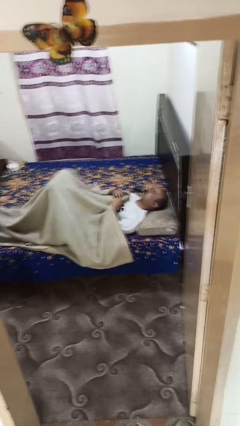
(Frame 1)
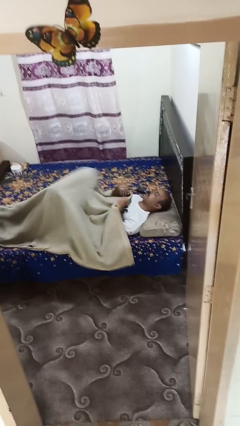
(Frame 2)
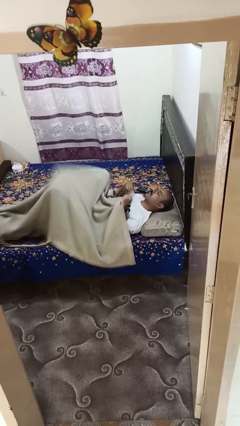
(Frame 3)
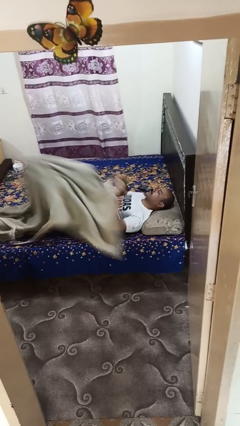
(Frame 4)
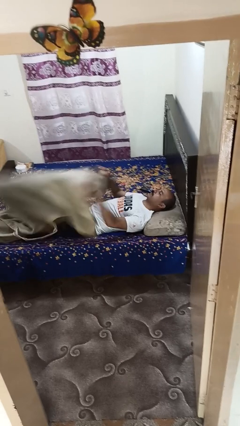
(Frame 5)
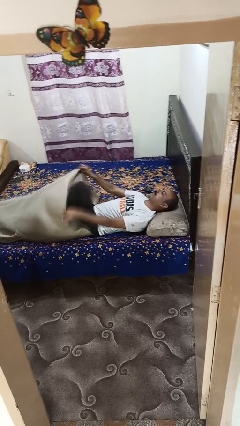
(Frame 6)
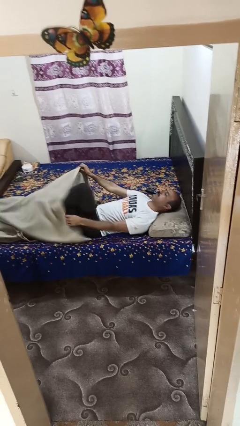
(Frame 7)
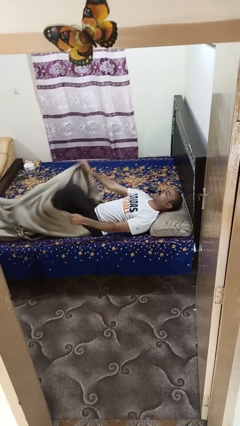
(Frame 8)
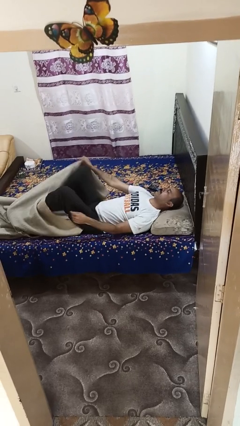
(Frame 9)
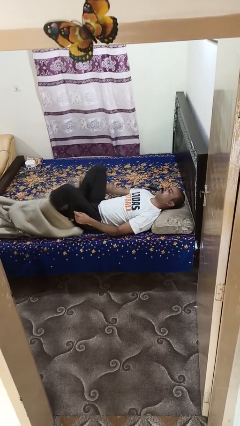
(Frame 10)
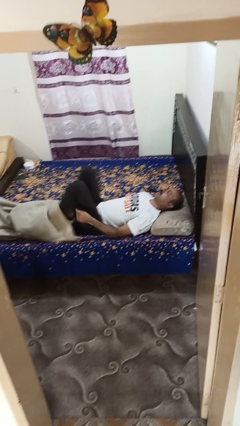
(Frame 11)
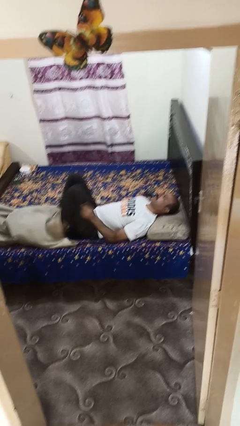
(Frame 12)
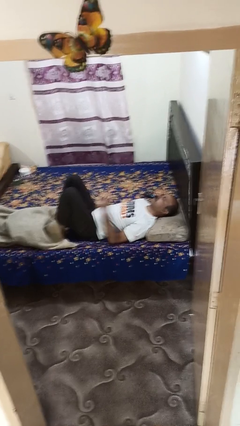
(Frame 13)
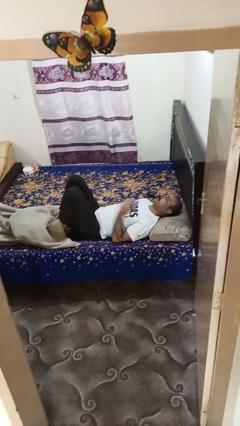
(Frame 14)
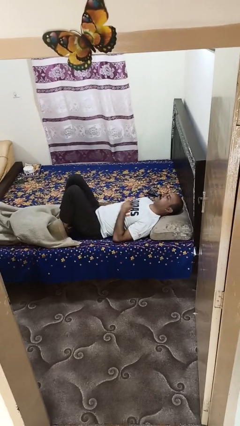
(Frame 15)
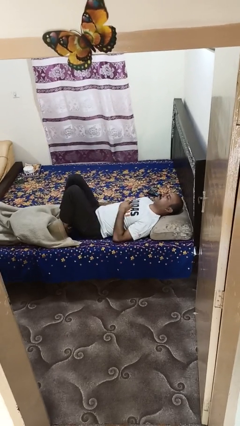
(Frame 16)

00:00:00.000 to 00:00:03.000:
person uncovers with bedsheets

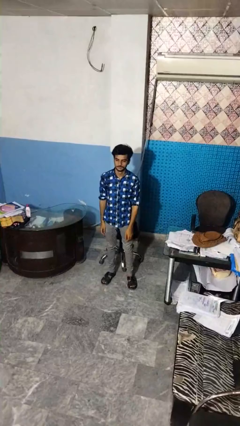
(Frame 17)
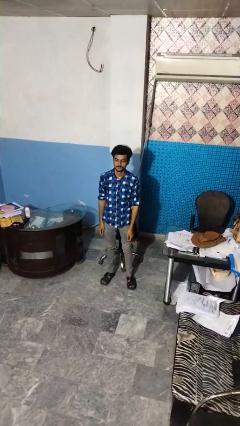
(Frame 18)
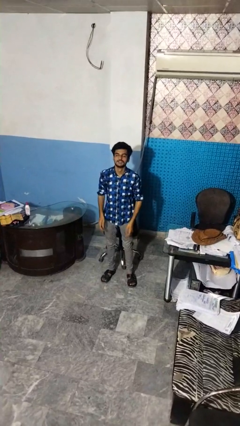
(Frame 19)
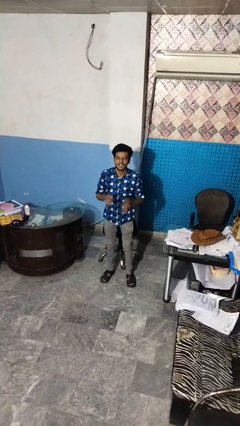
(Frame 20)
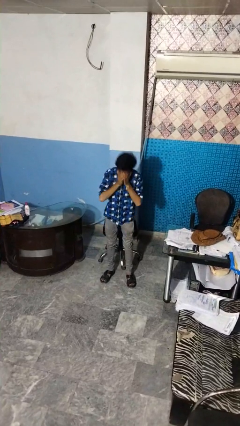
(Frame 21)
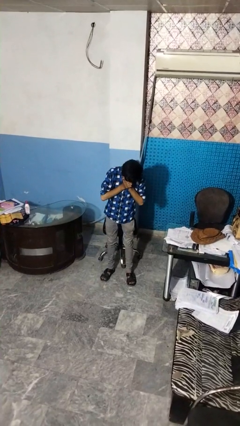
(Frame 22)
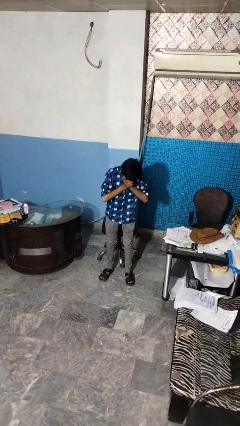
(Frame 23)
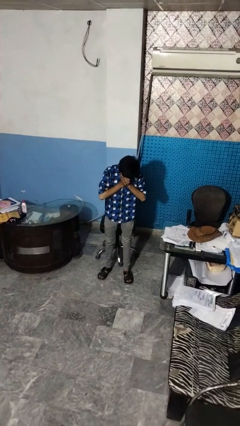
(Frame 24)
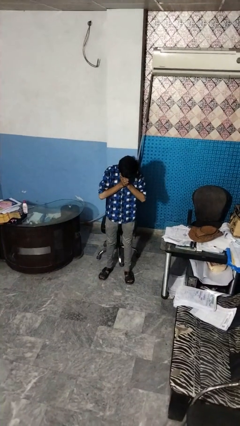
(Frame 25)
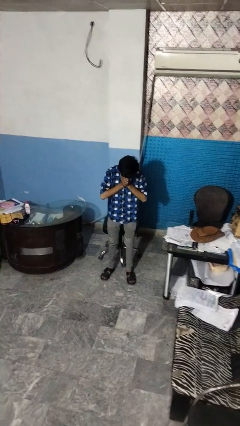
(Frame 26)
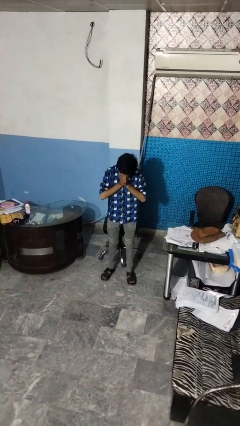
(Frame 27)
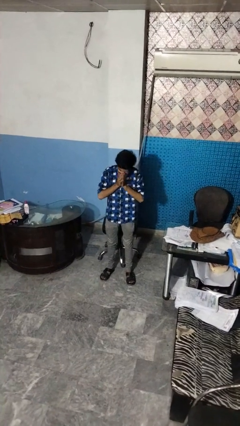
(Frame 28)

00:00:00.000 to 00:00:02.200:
person sneezes into hand

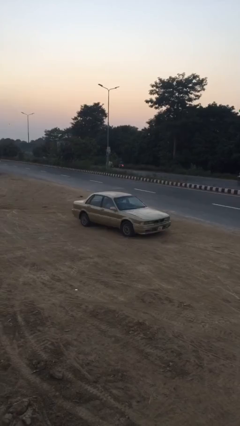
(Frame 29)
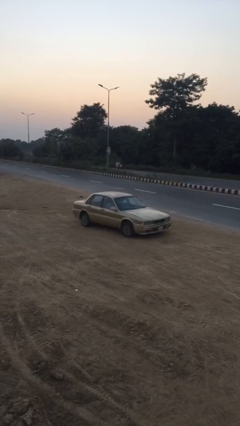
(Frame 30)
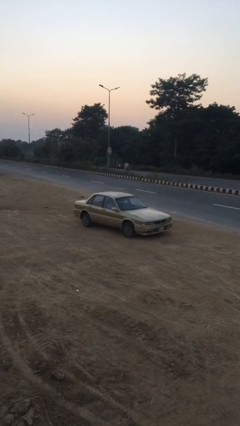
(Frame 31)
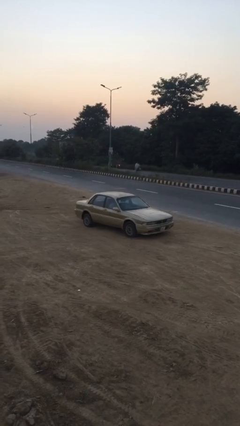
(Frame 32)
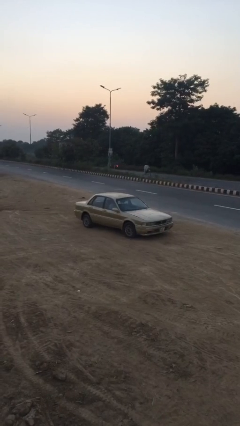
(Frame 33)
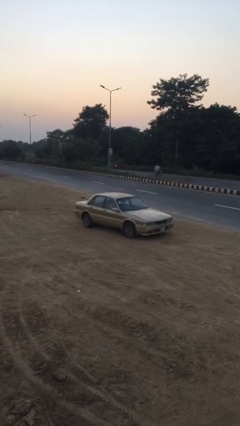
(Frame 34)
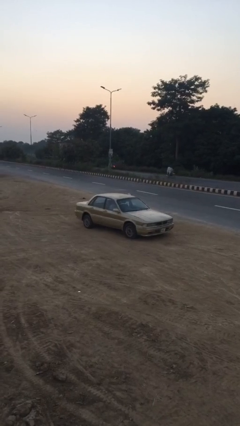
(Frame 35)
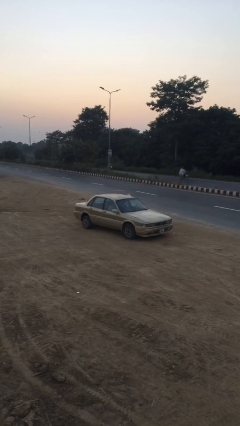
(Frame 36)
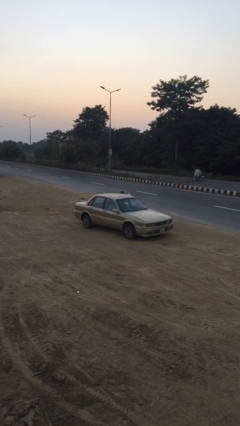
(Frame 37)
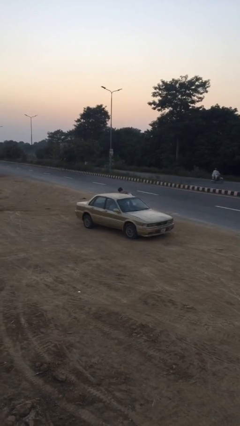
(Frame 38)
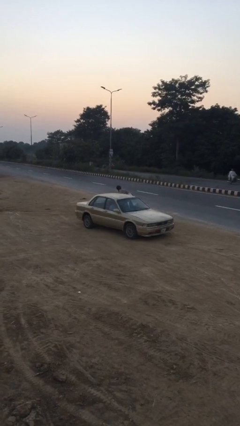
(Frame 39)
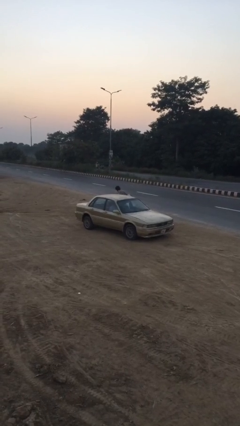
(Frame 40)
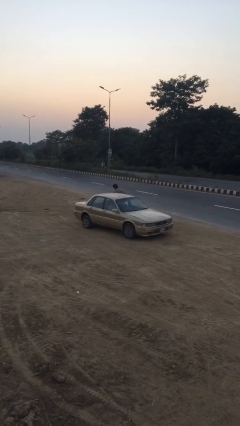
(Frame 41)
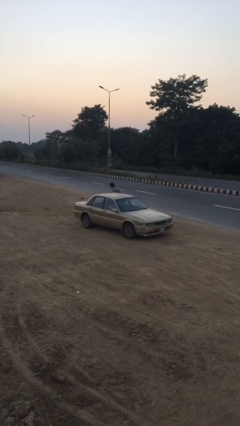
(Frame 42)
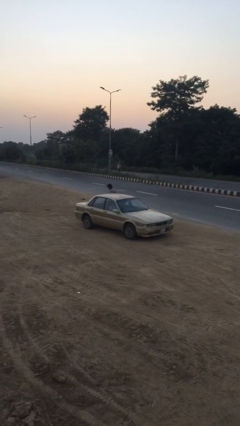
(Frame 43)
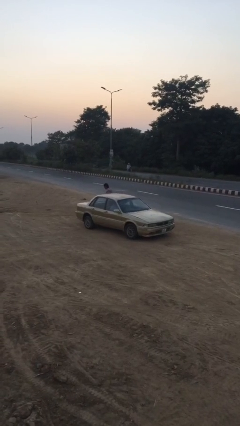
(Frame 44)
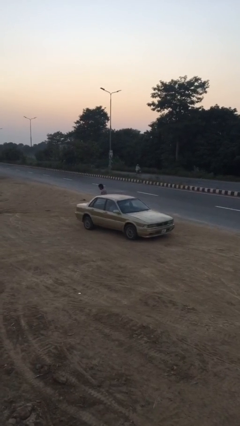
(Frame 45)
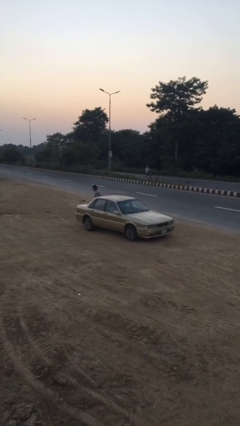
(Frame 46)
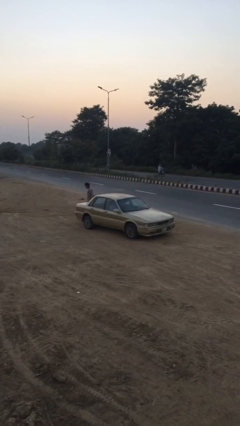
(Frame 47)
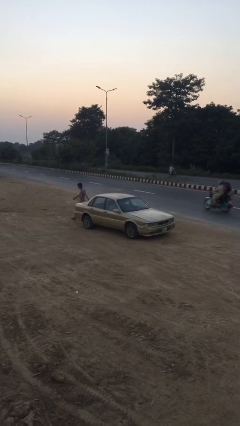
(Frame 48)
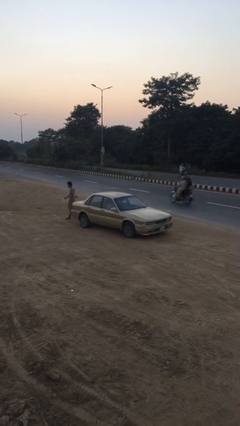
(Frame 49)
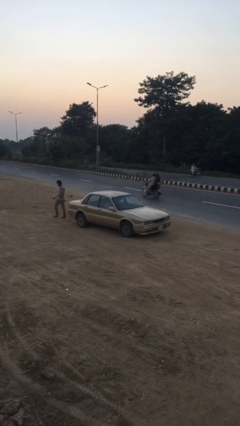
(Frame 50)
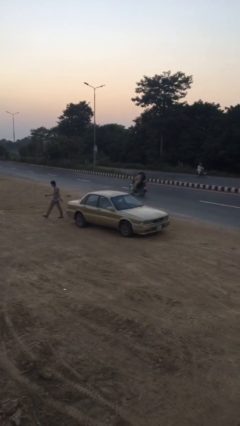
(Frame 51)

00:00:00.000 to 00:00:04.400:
car drops off person

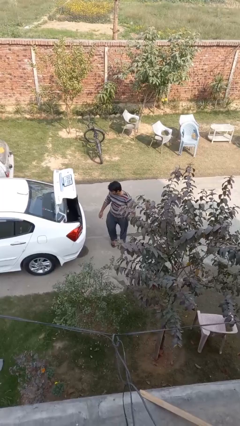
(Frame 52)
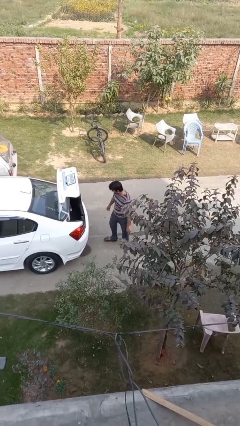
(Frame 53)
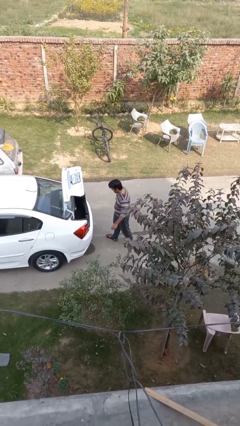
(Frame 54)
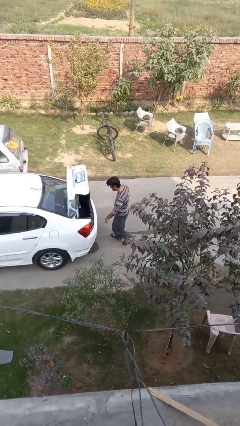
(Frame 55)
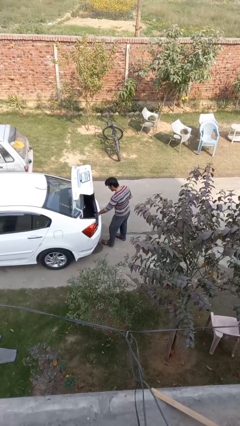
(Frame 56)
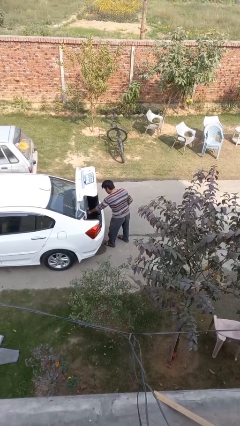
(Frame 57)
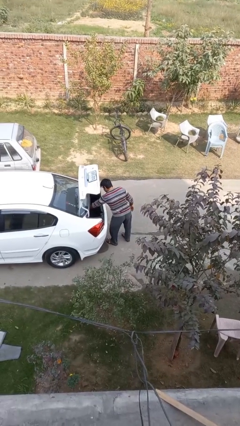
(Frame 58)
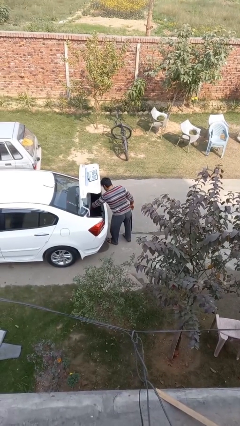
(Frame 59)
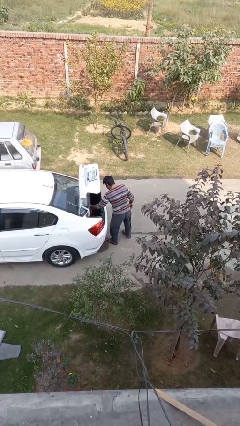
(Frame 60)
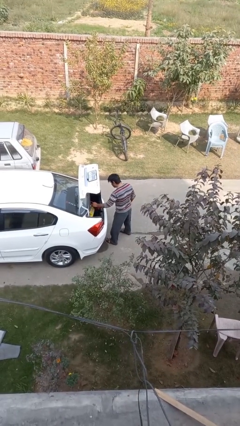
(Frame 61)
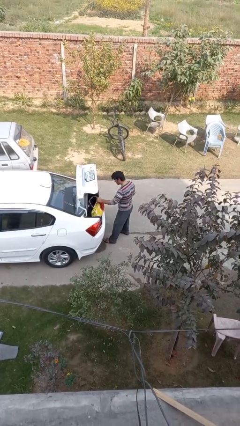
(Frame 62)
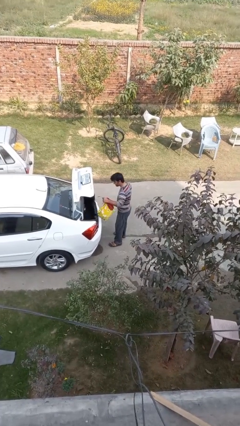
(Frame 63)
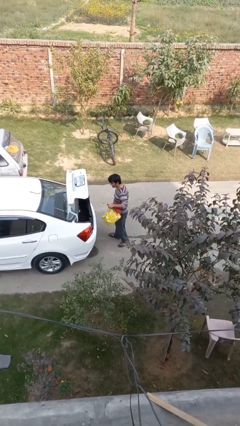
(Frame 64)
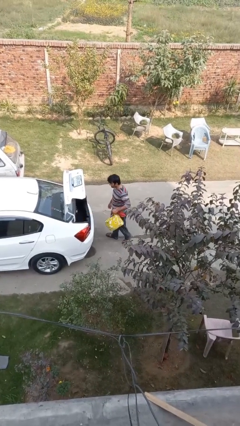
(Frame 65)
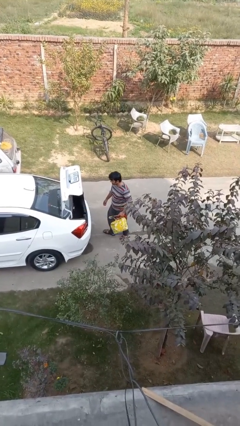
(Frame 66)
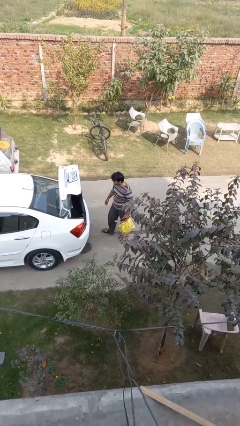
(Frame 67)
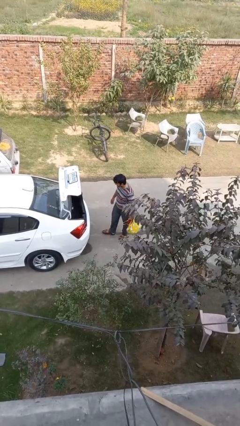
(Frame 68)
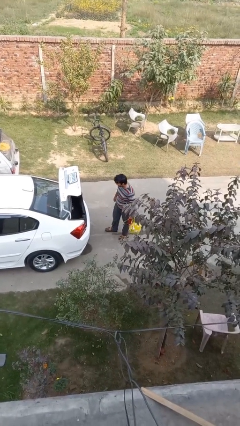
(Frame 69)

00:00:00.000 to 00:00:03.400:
person unloads car

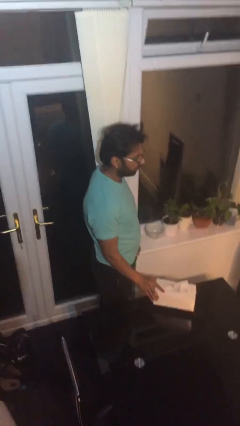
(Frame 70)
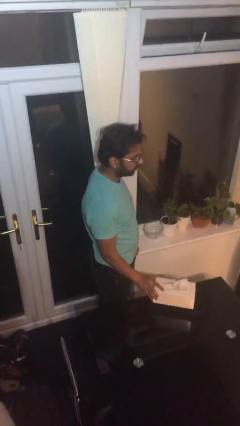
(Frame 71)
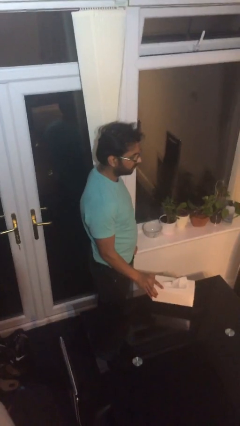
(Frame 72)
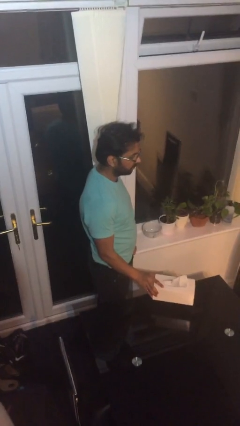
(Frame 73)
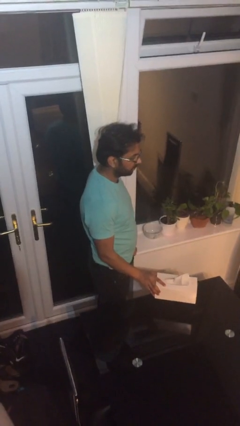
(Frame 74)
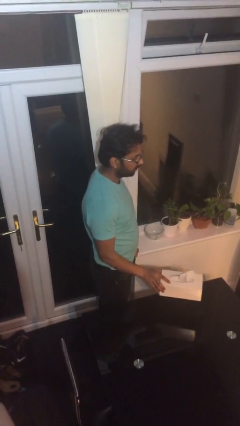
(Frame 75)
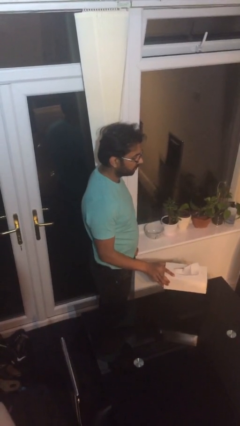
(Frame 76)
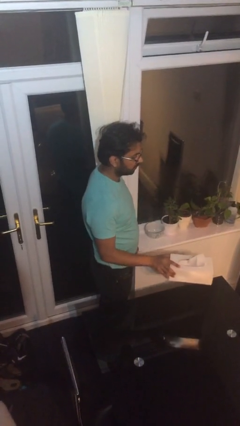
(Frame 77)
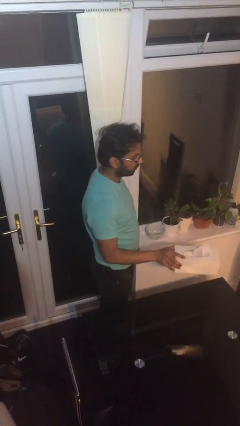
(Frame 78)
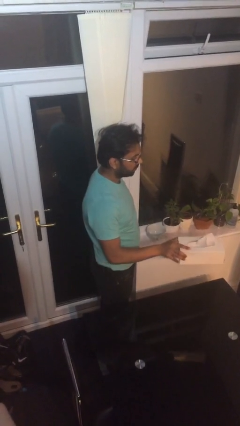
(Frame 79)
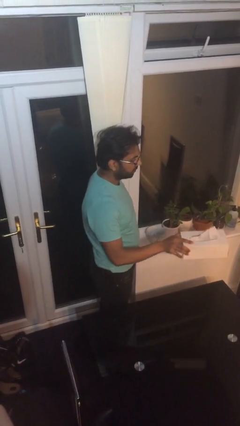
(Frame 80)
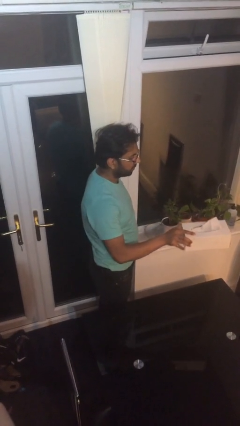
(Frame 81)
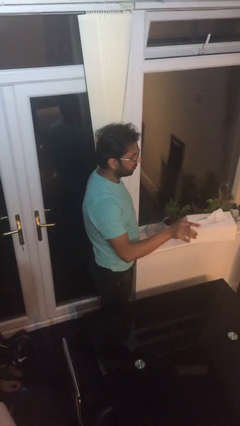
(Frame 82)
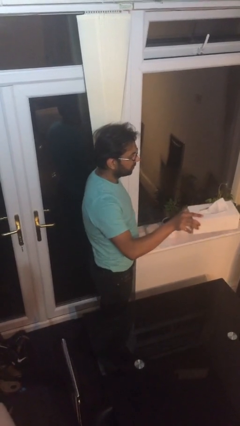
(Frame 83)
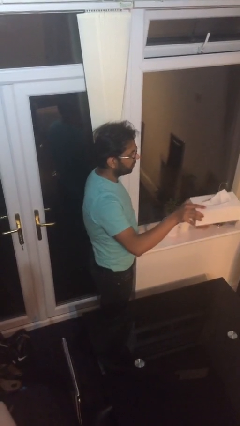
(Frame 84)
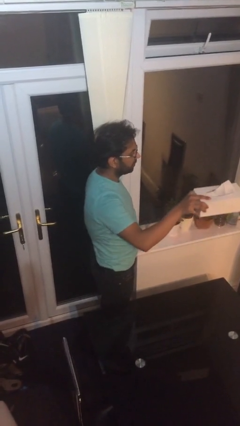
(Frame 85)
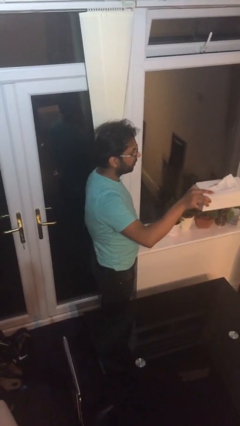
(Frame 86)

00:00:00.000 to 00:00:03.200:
person picks up object from table

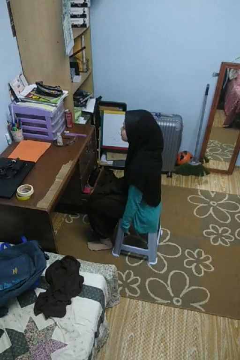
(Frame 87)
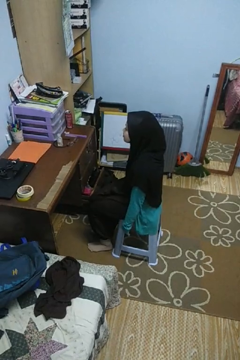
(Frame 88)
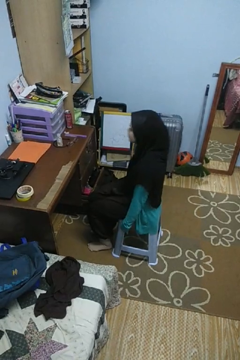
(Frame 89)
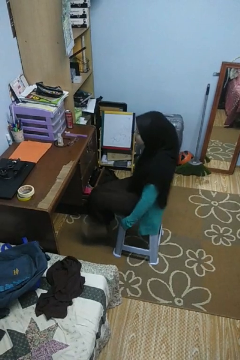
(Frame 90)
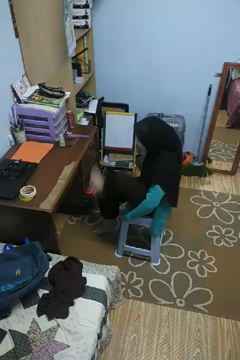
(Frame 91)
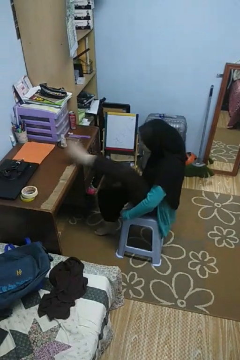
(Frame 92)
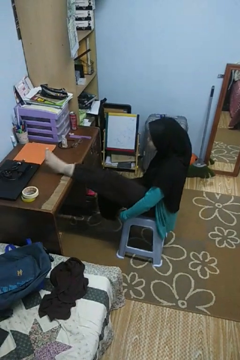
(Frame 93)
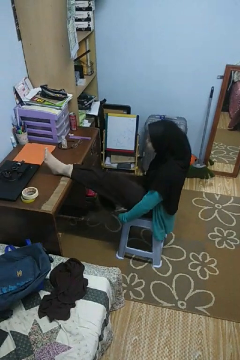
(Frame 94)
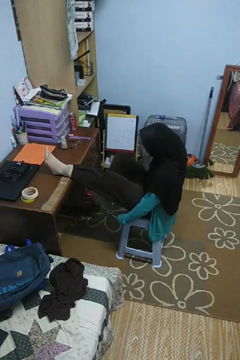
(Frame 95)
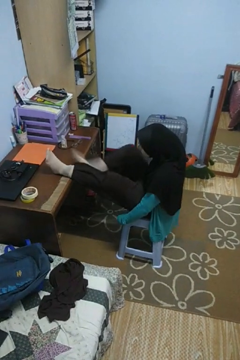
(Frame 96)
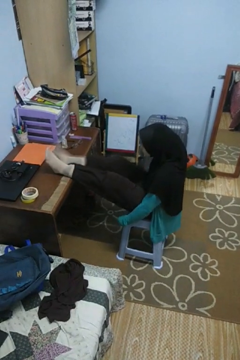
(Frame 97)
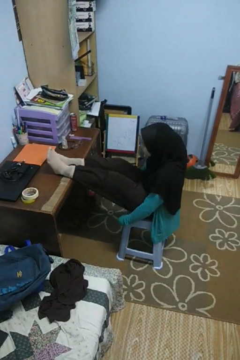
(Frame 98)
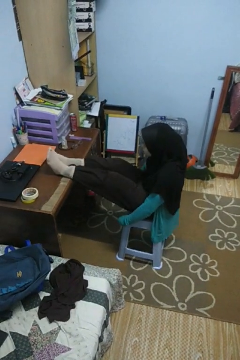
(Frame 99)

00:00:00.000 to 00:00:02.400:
person puts feet up
